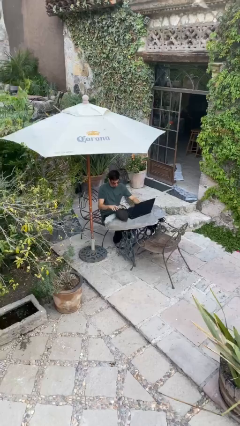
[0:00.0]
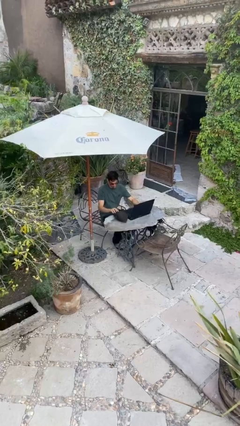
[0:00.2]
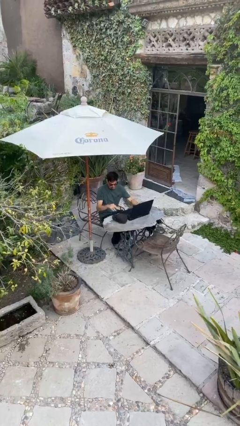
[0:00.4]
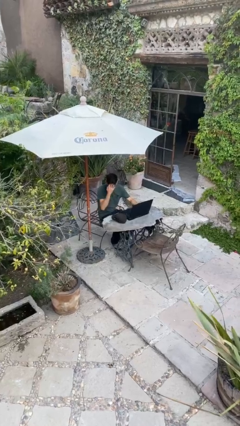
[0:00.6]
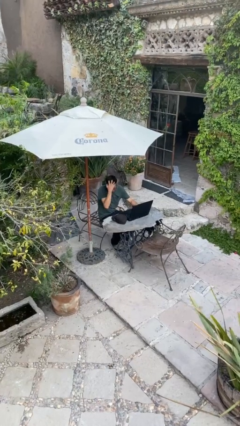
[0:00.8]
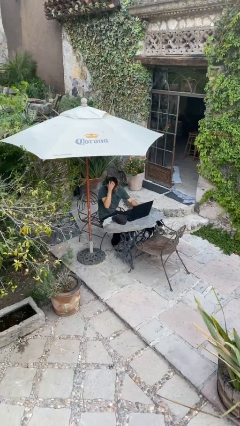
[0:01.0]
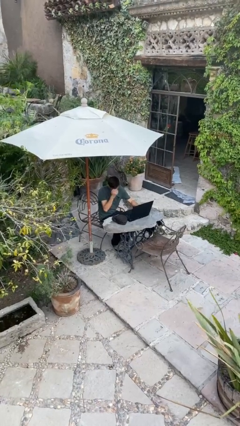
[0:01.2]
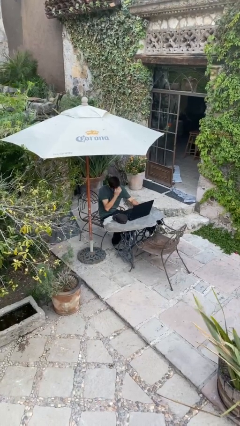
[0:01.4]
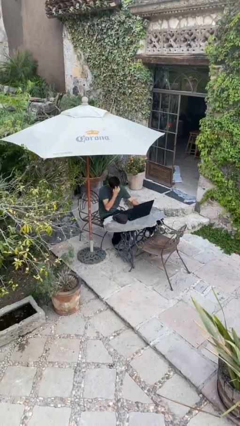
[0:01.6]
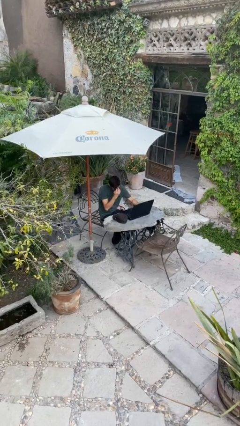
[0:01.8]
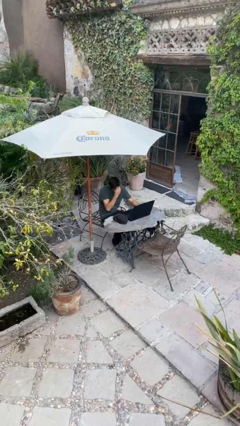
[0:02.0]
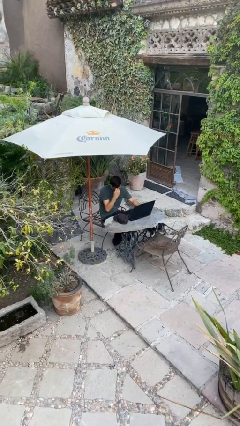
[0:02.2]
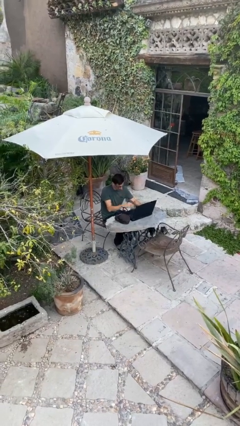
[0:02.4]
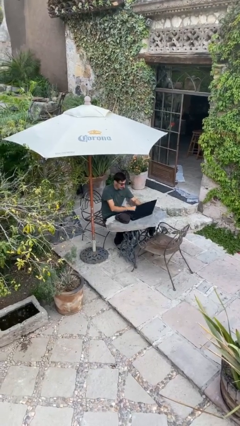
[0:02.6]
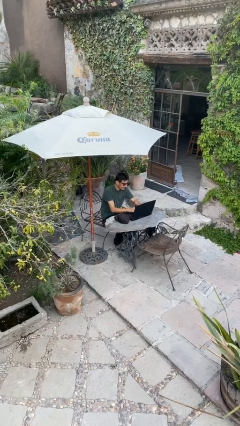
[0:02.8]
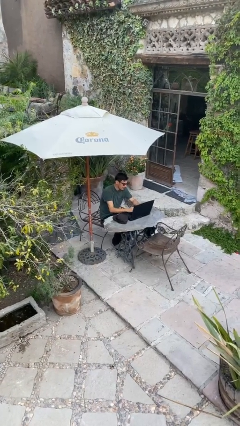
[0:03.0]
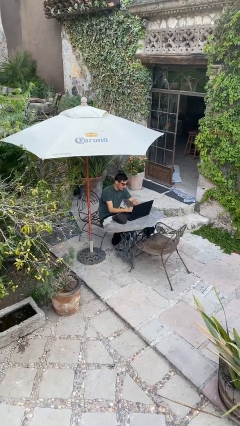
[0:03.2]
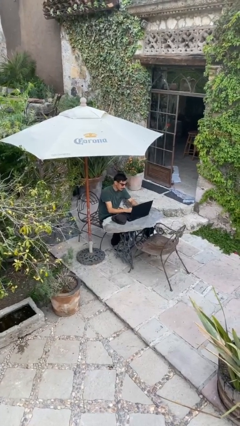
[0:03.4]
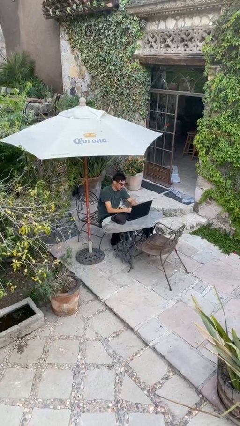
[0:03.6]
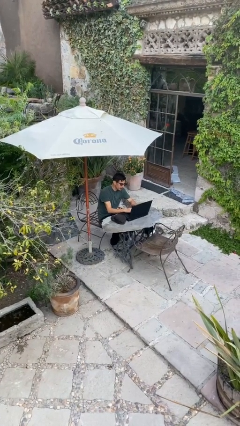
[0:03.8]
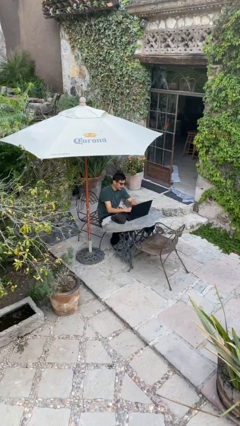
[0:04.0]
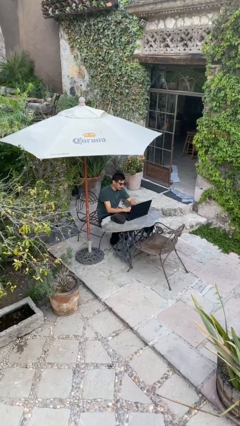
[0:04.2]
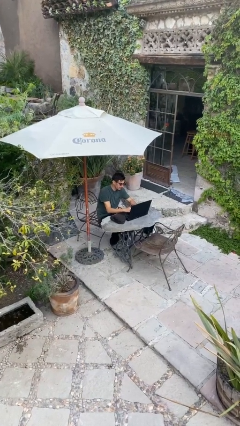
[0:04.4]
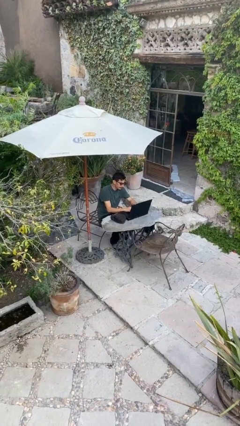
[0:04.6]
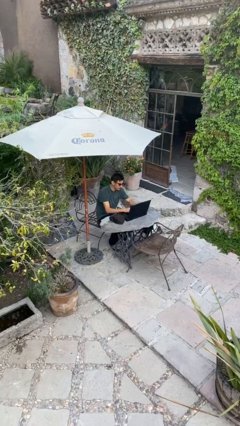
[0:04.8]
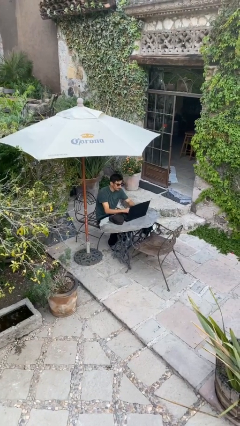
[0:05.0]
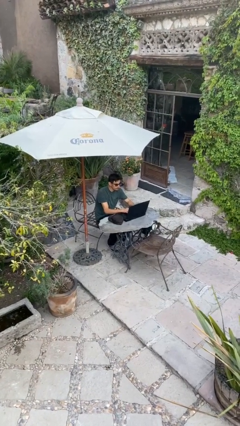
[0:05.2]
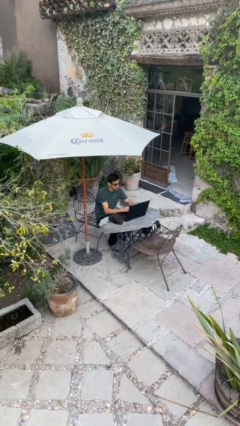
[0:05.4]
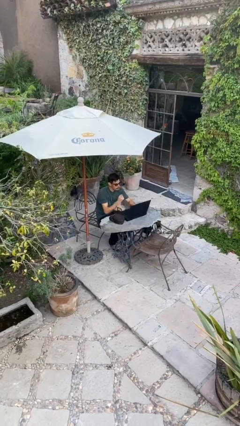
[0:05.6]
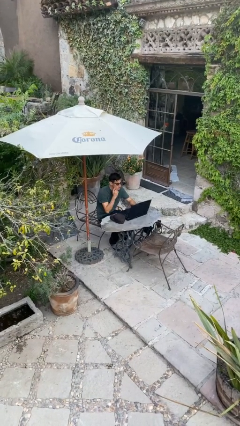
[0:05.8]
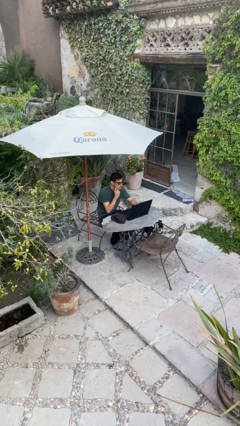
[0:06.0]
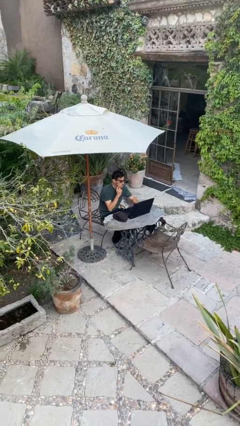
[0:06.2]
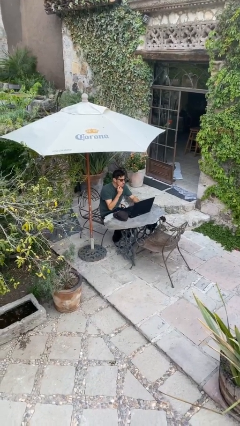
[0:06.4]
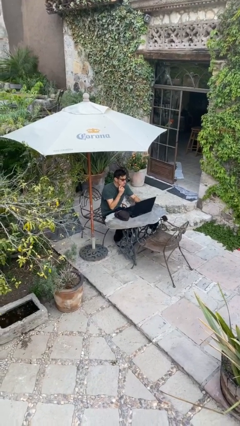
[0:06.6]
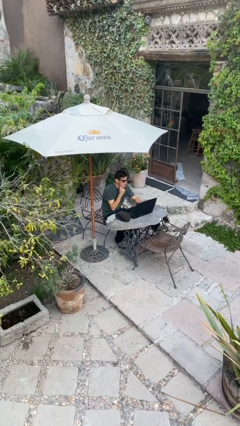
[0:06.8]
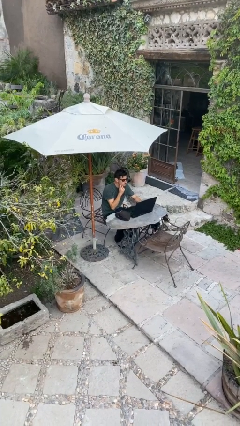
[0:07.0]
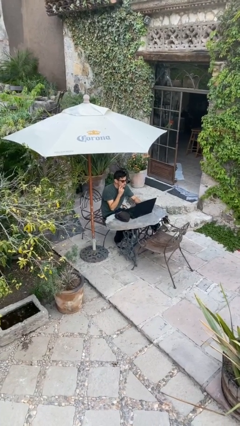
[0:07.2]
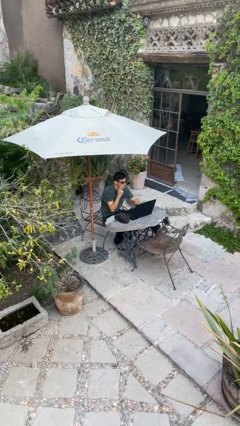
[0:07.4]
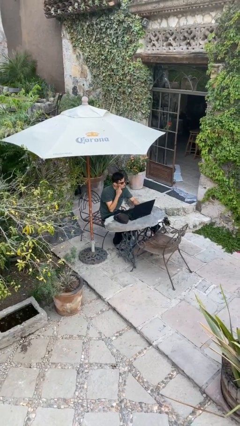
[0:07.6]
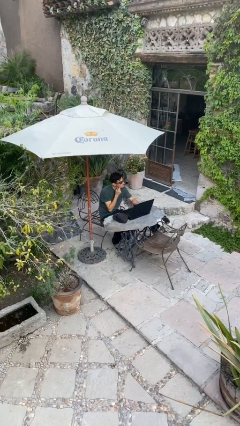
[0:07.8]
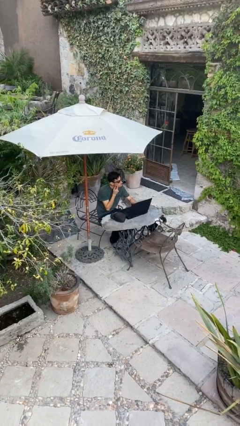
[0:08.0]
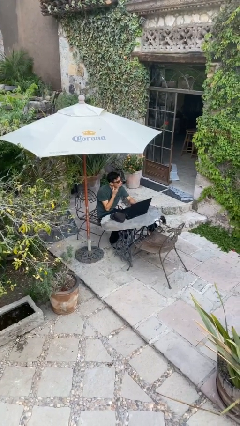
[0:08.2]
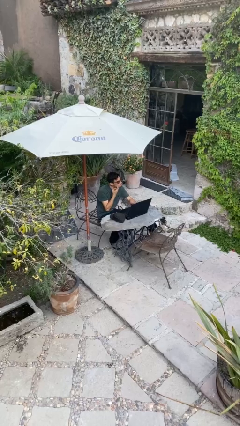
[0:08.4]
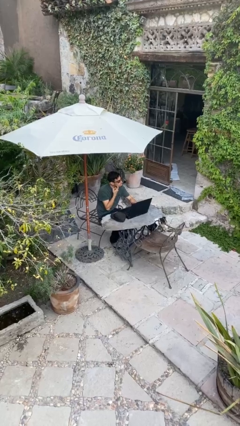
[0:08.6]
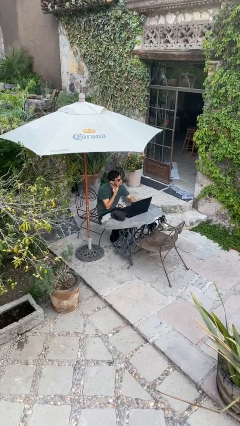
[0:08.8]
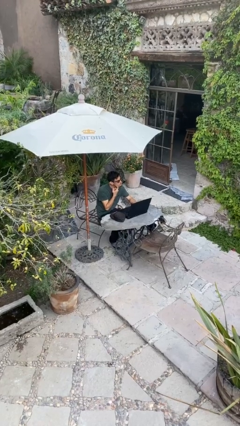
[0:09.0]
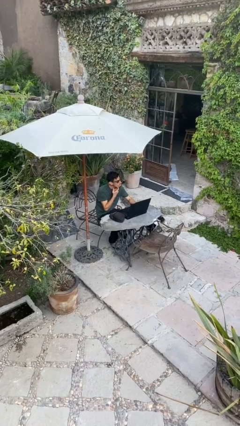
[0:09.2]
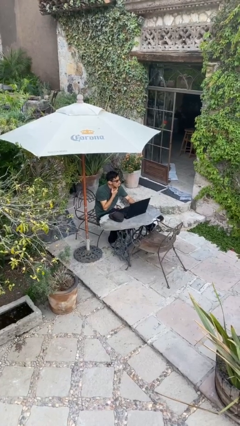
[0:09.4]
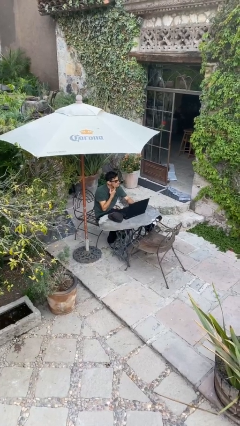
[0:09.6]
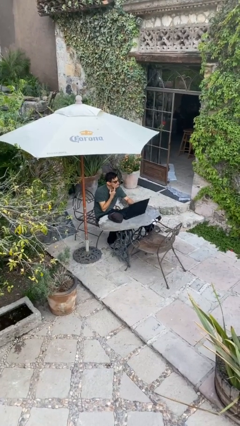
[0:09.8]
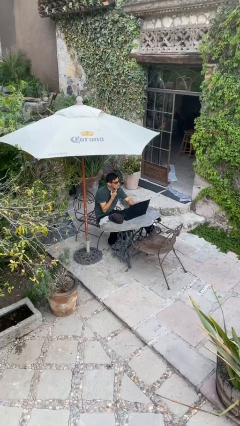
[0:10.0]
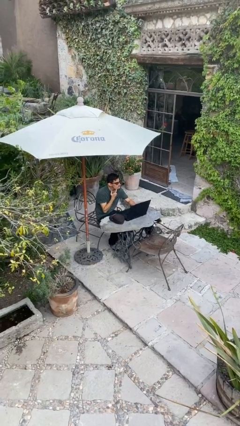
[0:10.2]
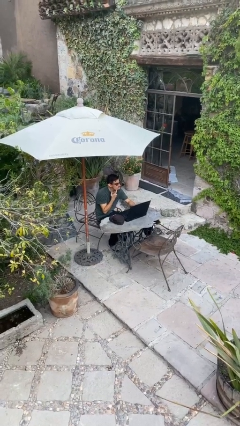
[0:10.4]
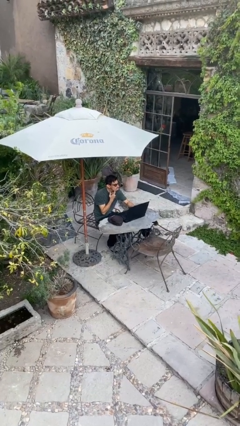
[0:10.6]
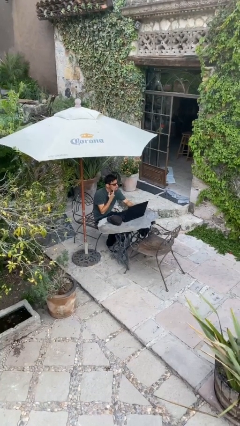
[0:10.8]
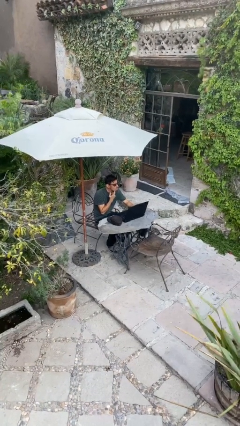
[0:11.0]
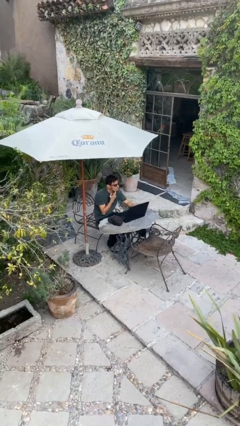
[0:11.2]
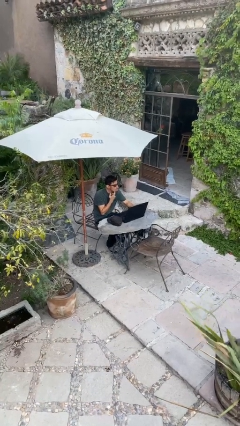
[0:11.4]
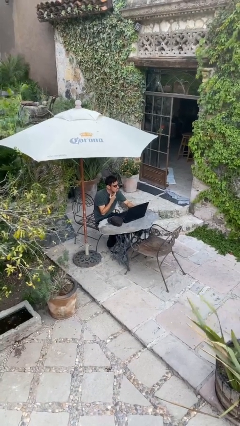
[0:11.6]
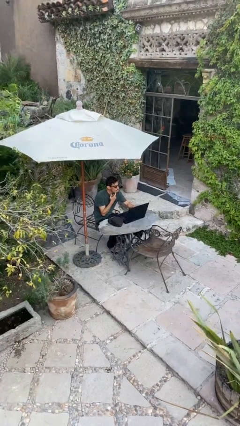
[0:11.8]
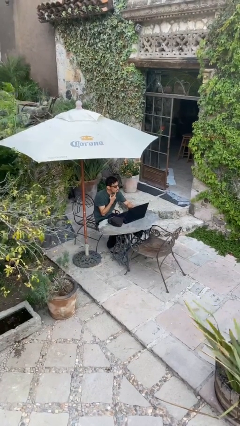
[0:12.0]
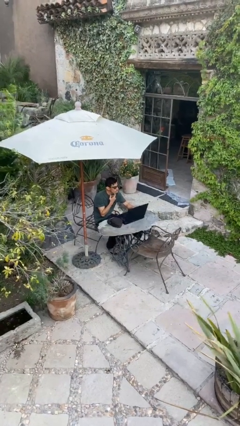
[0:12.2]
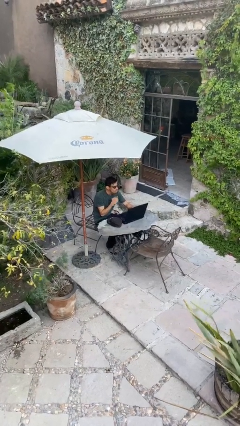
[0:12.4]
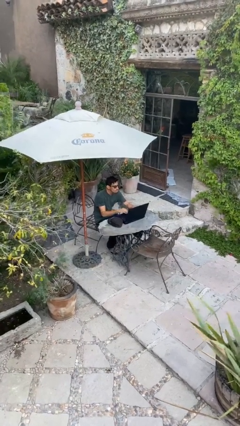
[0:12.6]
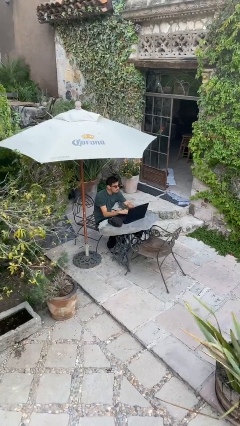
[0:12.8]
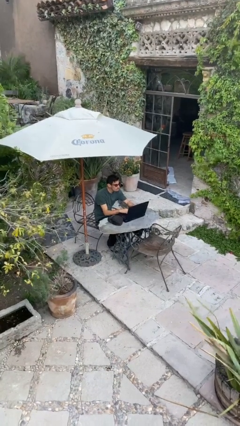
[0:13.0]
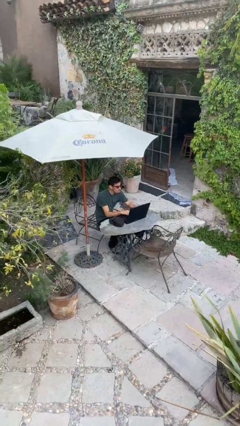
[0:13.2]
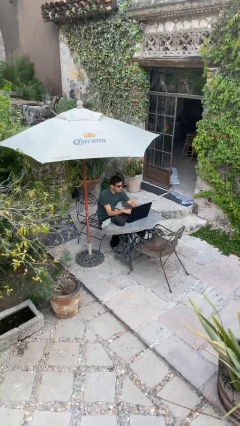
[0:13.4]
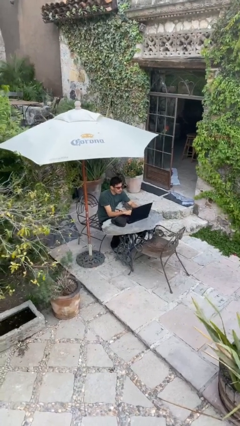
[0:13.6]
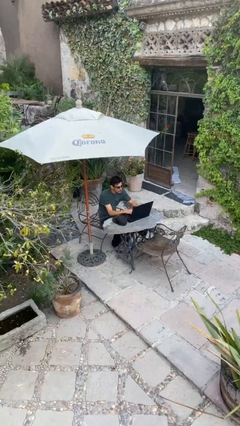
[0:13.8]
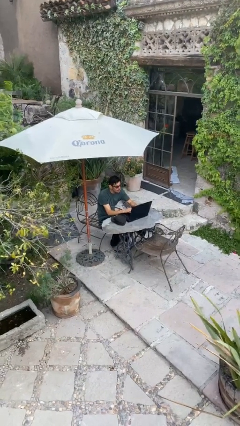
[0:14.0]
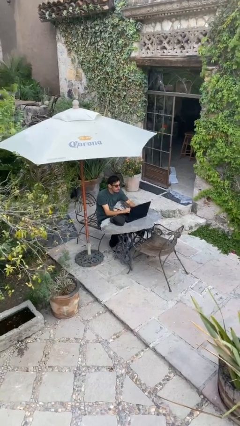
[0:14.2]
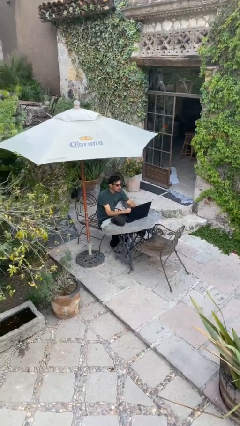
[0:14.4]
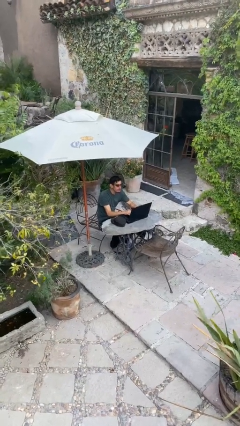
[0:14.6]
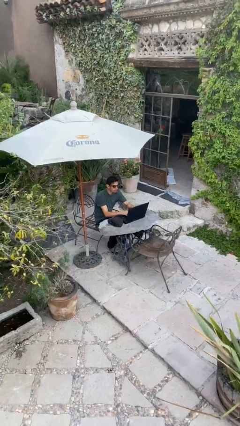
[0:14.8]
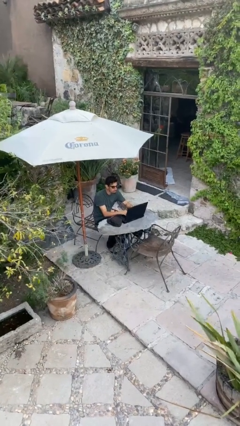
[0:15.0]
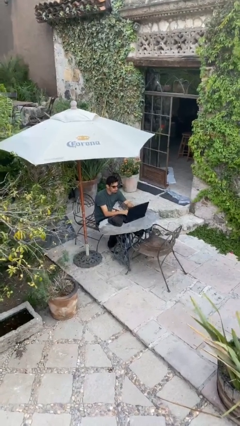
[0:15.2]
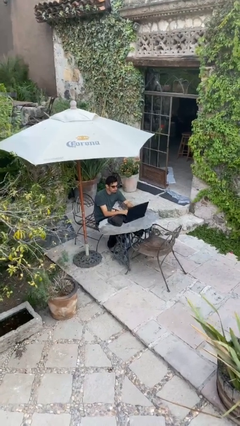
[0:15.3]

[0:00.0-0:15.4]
person interacts with laptop

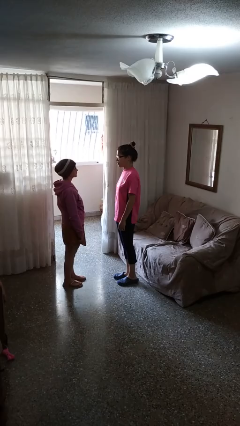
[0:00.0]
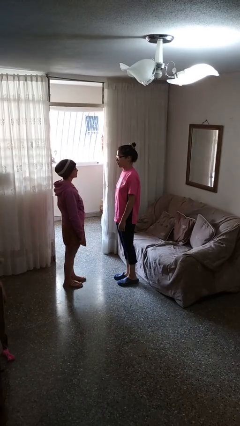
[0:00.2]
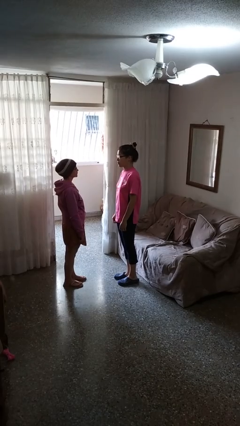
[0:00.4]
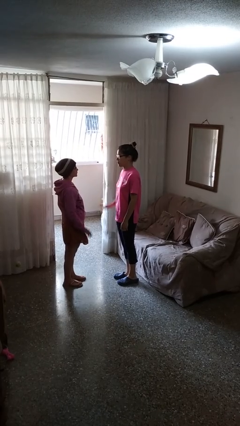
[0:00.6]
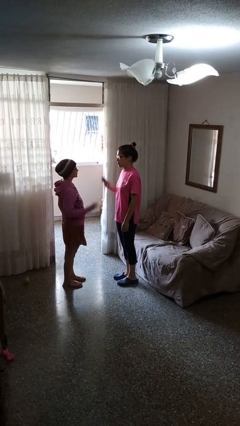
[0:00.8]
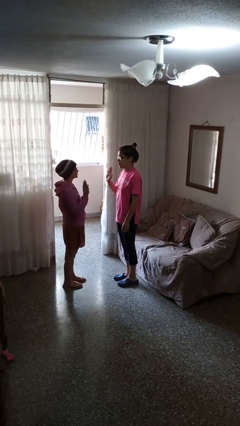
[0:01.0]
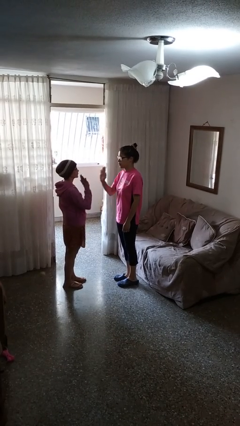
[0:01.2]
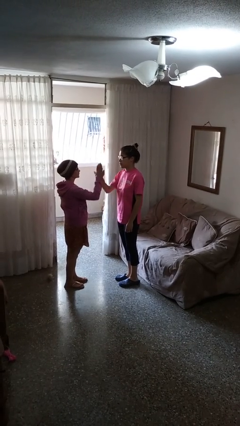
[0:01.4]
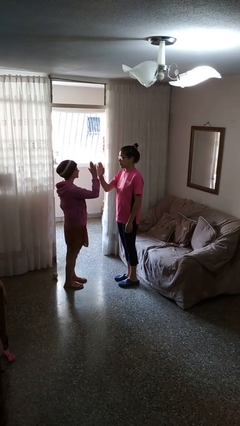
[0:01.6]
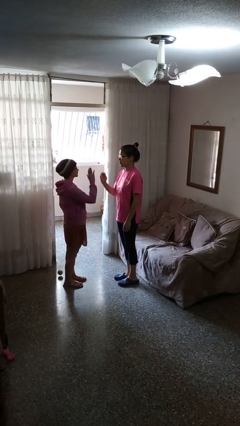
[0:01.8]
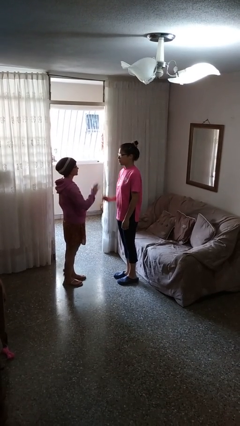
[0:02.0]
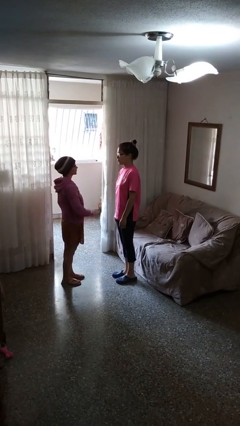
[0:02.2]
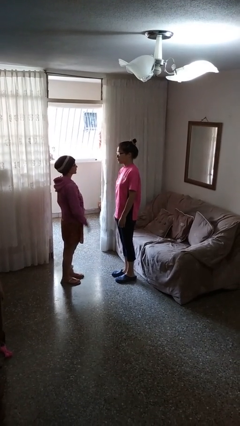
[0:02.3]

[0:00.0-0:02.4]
person highfives hand

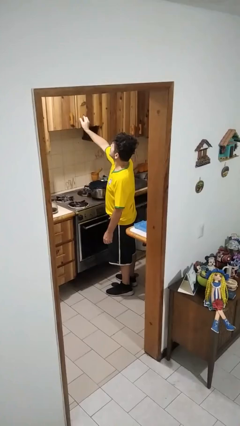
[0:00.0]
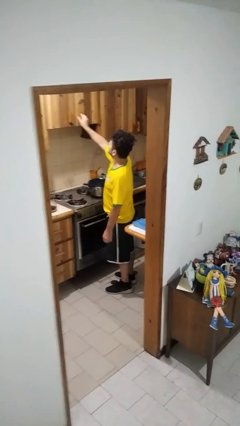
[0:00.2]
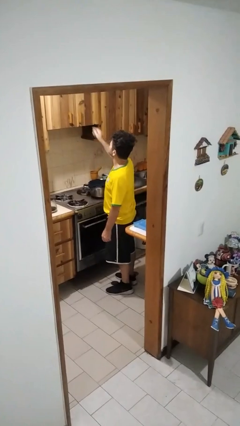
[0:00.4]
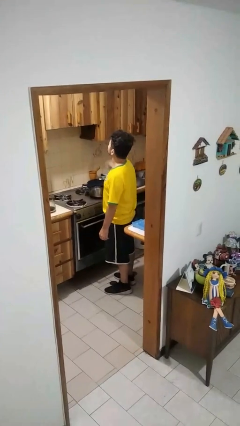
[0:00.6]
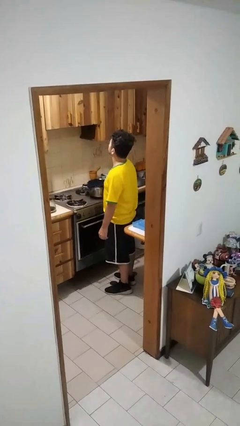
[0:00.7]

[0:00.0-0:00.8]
person closes cabinet
